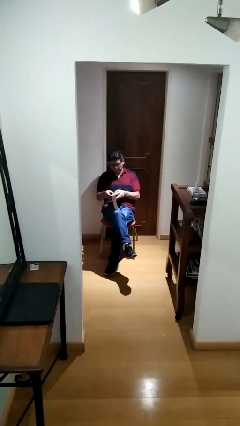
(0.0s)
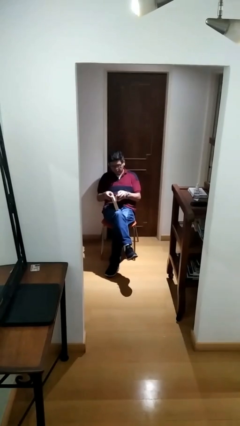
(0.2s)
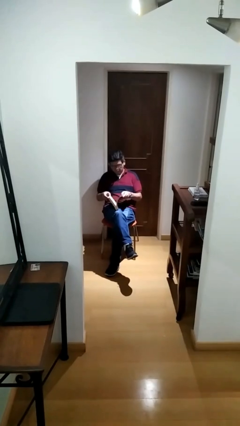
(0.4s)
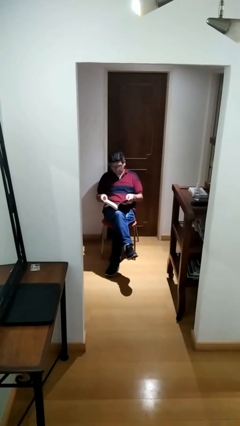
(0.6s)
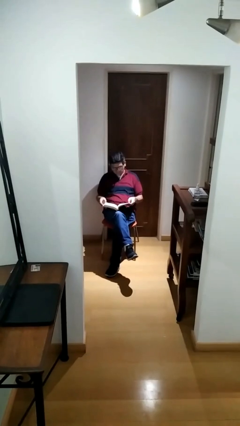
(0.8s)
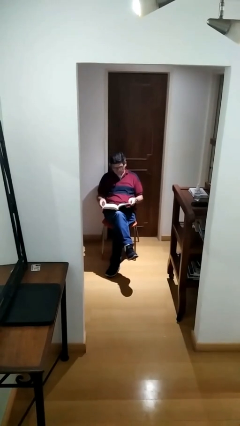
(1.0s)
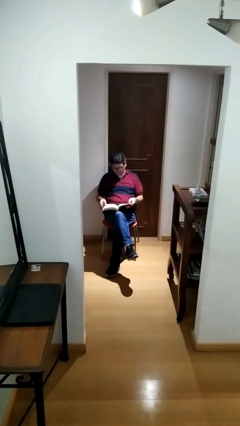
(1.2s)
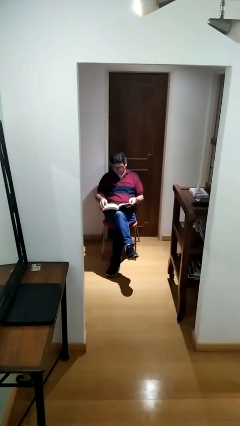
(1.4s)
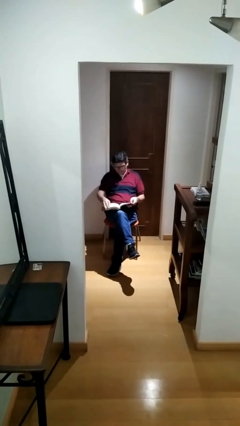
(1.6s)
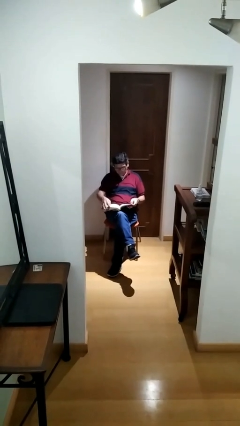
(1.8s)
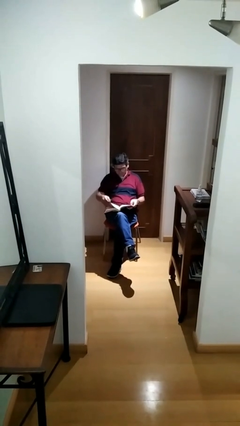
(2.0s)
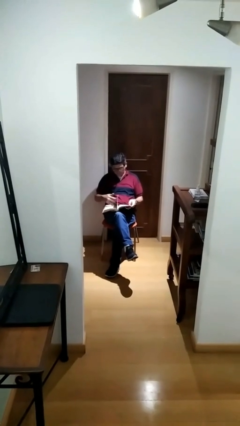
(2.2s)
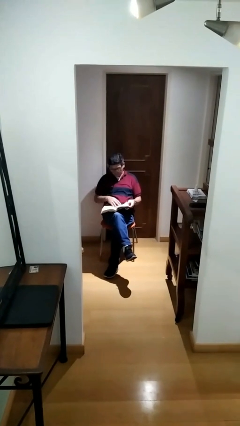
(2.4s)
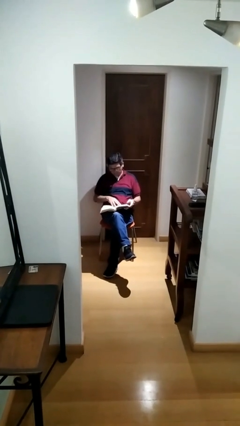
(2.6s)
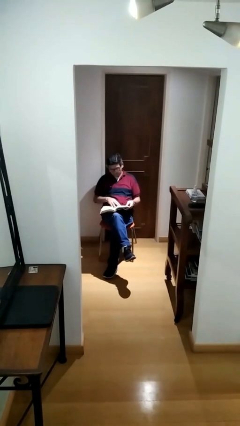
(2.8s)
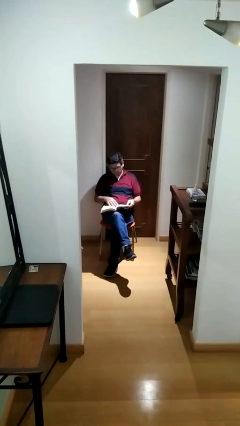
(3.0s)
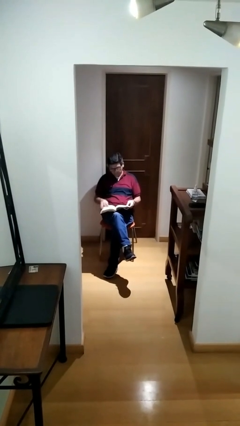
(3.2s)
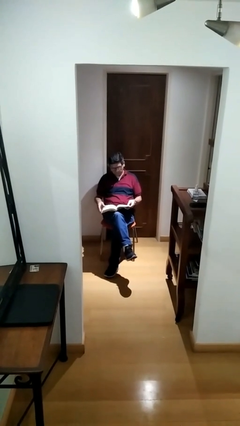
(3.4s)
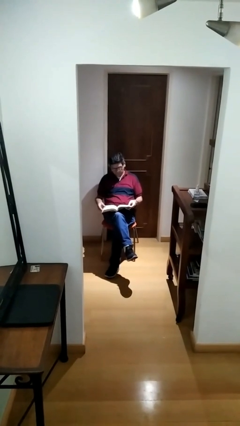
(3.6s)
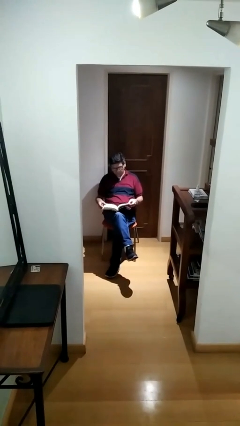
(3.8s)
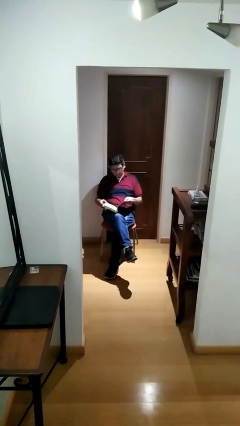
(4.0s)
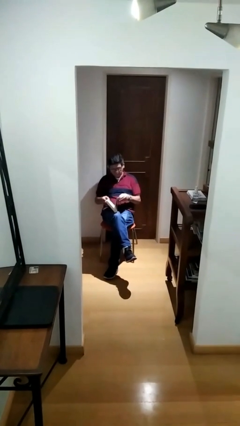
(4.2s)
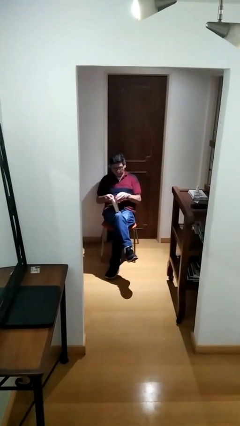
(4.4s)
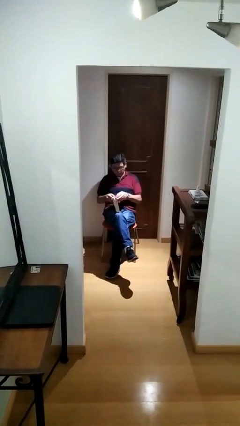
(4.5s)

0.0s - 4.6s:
person reads document

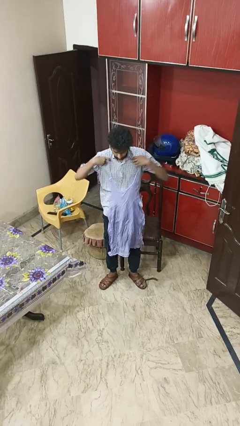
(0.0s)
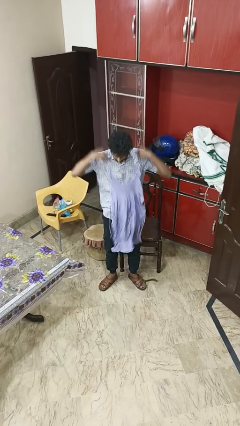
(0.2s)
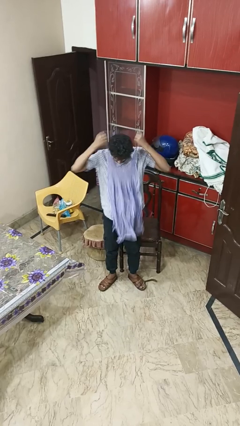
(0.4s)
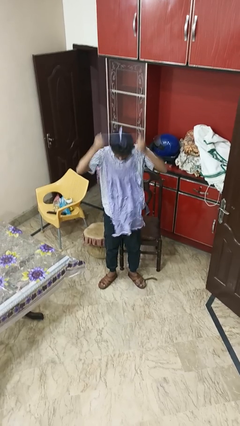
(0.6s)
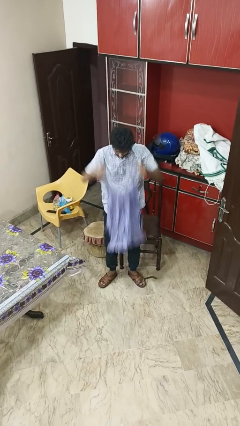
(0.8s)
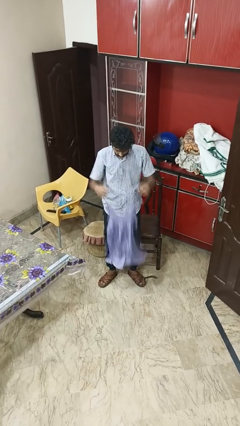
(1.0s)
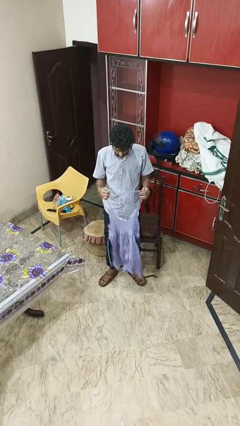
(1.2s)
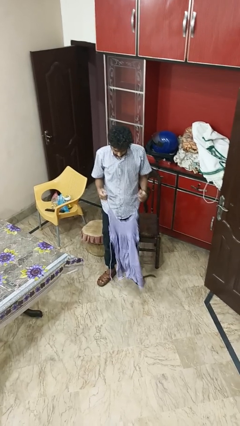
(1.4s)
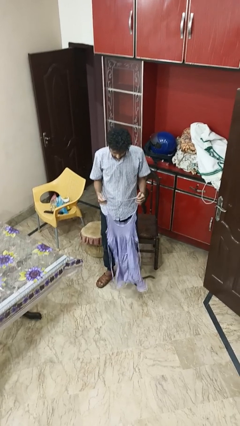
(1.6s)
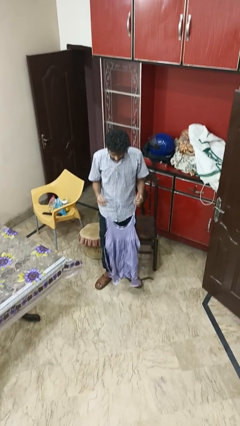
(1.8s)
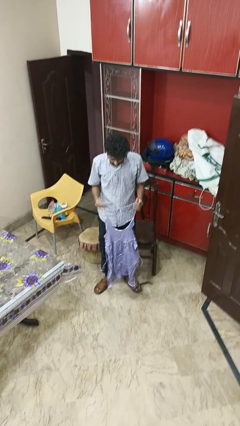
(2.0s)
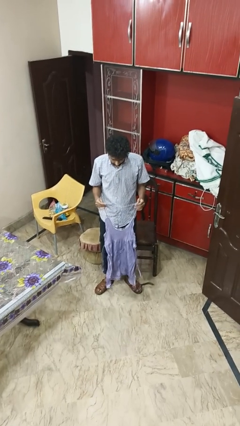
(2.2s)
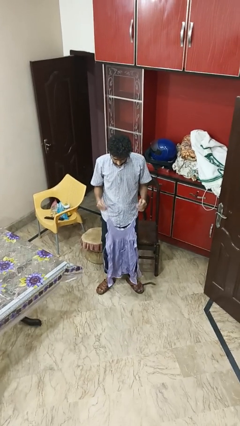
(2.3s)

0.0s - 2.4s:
person takes off apron

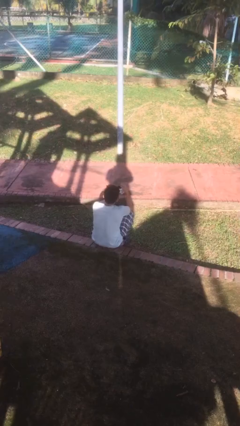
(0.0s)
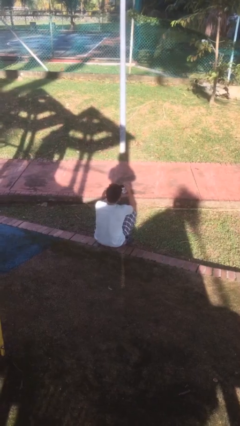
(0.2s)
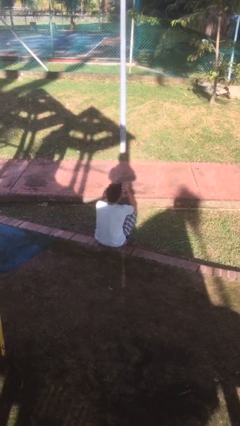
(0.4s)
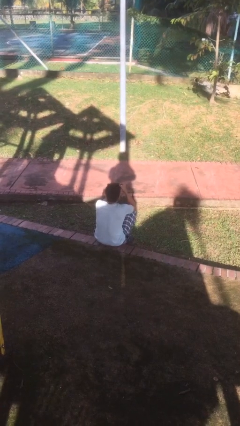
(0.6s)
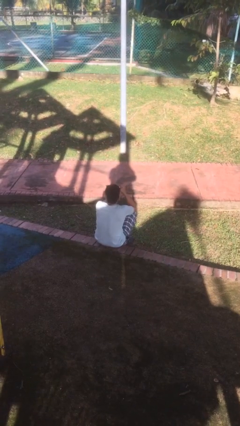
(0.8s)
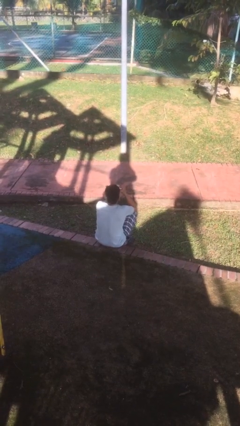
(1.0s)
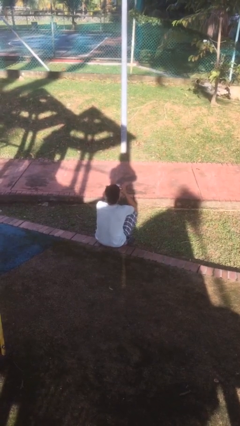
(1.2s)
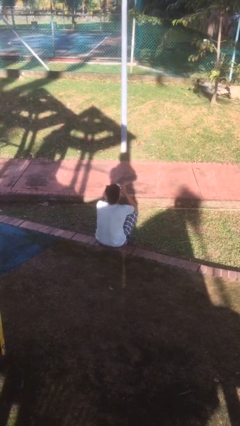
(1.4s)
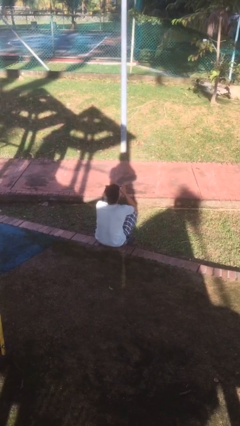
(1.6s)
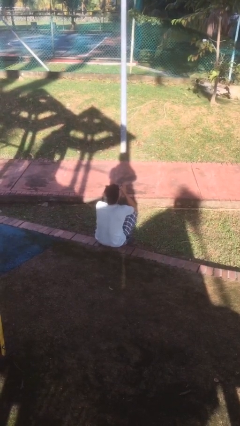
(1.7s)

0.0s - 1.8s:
person drinks from mug

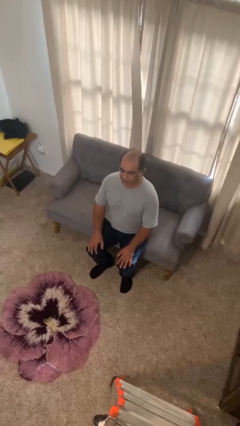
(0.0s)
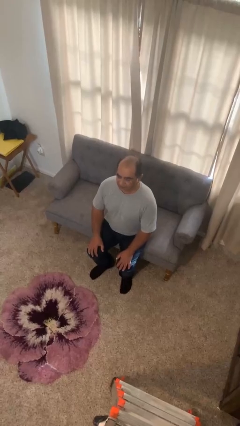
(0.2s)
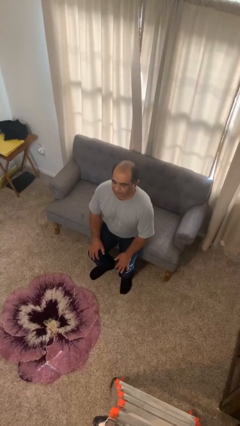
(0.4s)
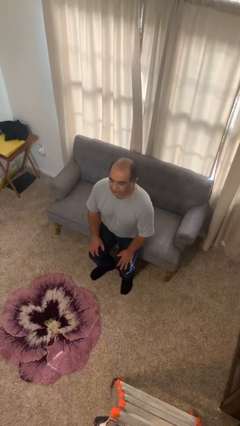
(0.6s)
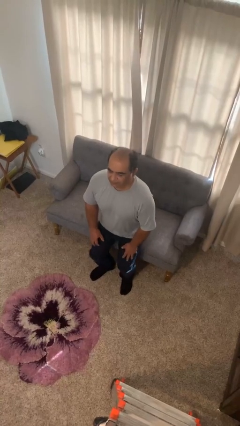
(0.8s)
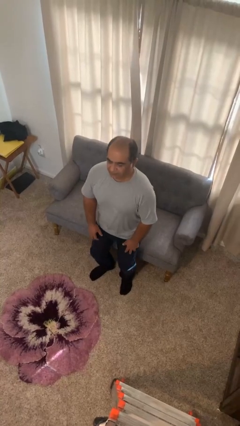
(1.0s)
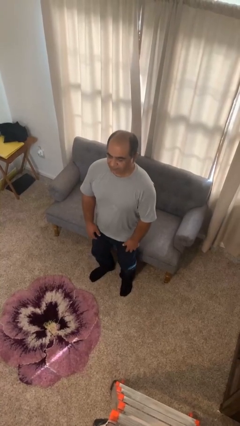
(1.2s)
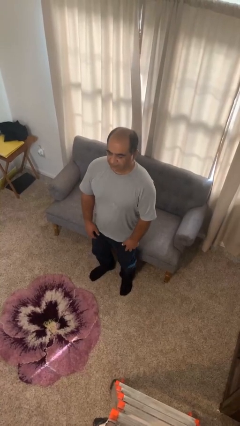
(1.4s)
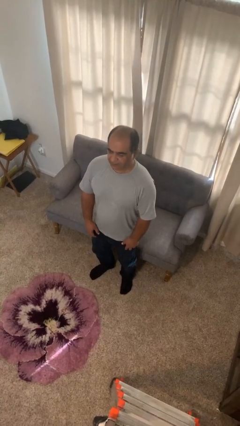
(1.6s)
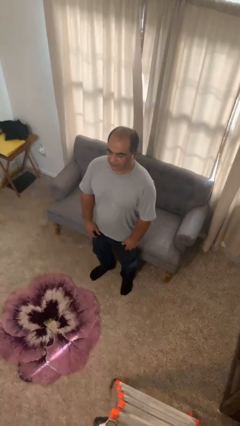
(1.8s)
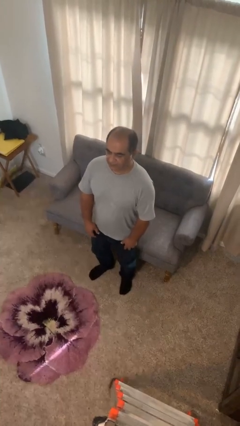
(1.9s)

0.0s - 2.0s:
person stands up

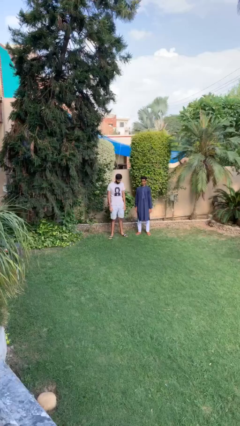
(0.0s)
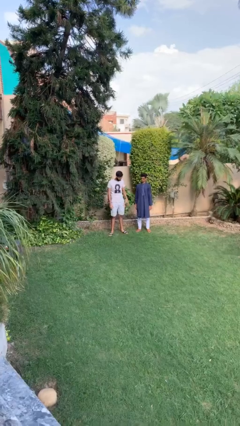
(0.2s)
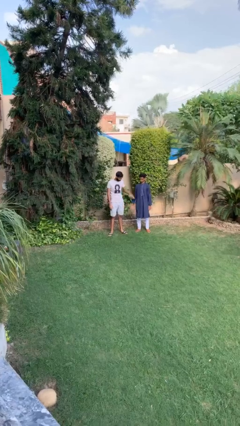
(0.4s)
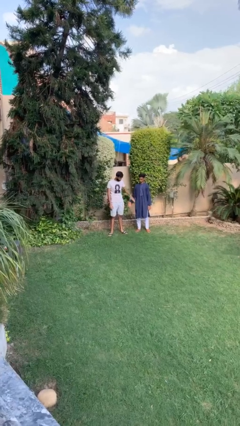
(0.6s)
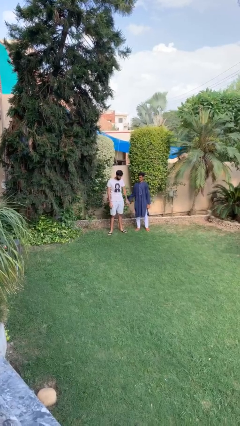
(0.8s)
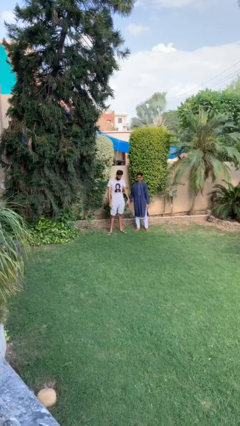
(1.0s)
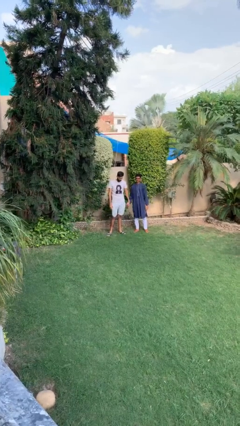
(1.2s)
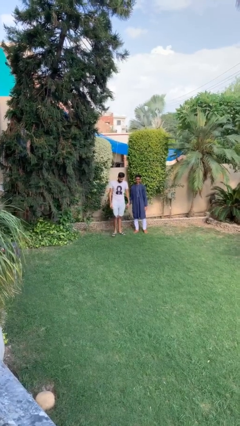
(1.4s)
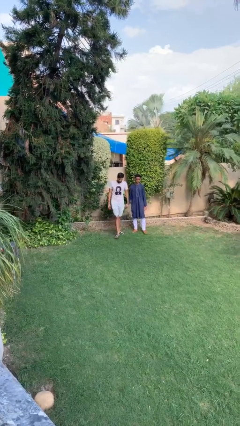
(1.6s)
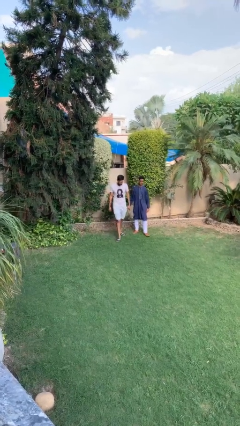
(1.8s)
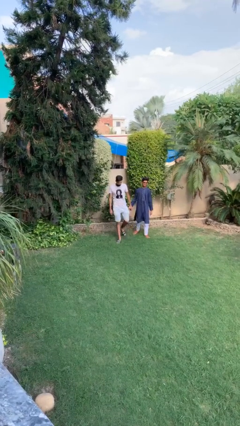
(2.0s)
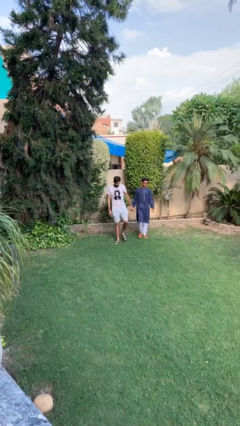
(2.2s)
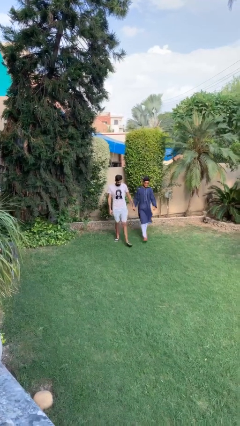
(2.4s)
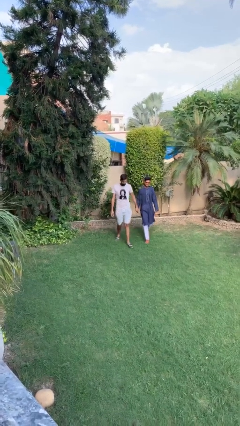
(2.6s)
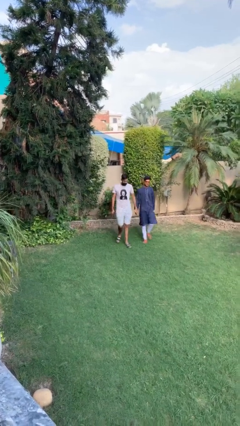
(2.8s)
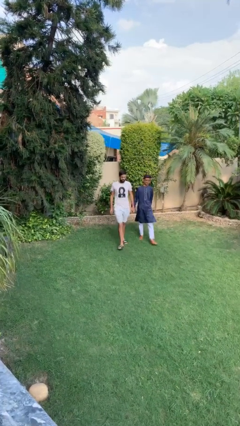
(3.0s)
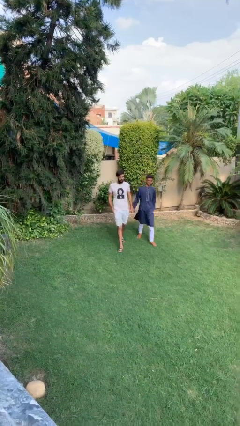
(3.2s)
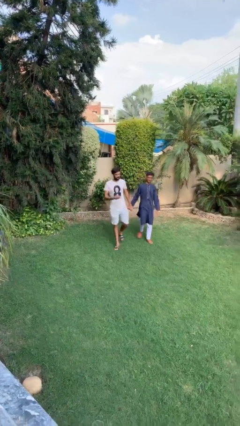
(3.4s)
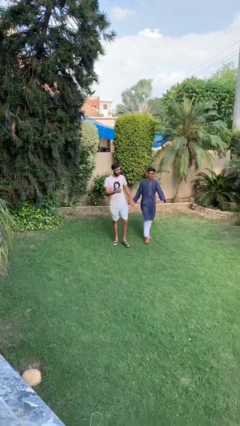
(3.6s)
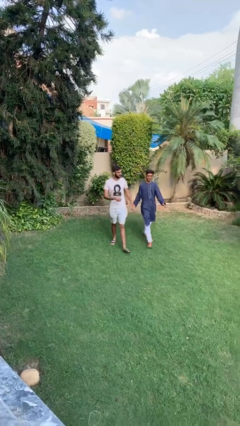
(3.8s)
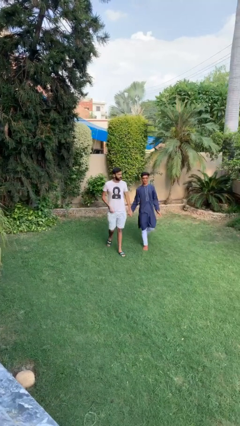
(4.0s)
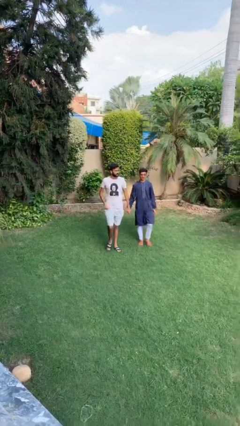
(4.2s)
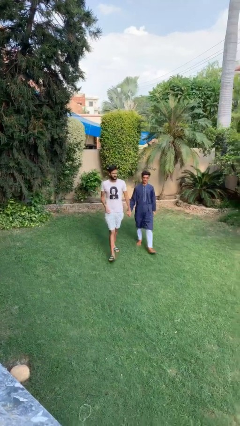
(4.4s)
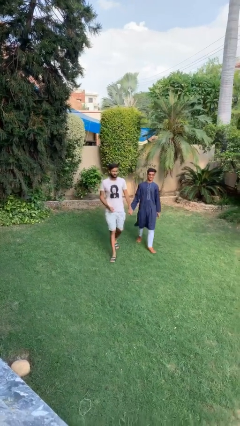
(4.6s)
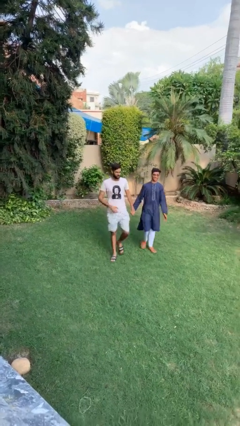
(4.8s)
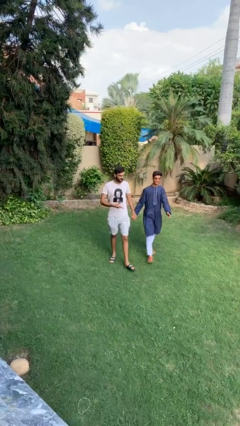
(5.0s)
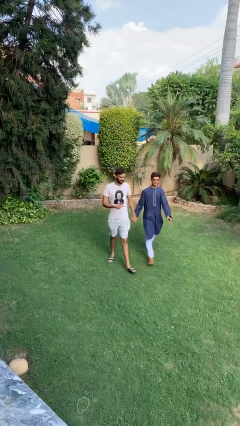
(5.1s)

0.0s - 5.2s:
person holds hand

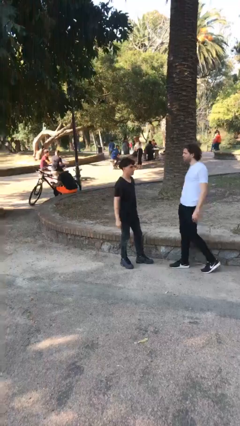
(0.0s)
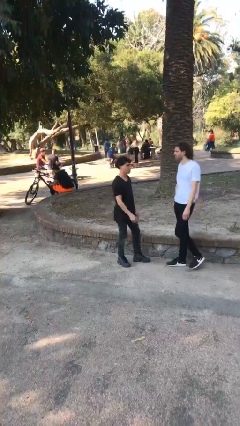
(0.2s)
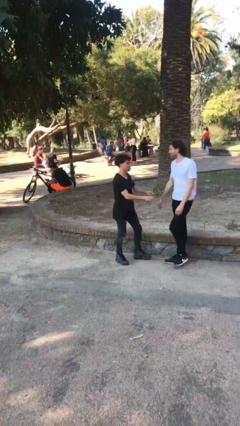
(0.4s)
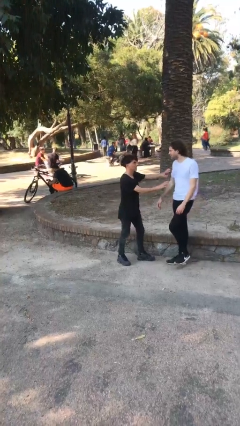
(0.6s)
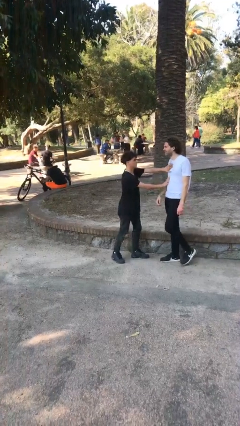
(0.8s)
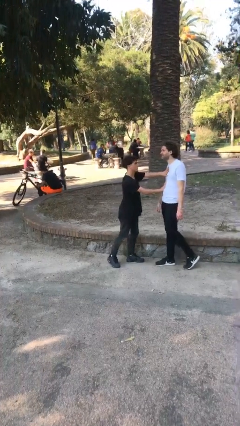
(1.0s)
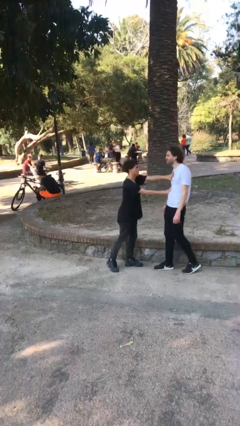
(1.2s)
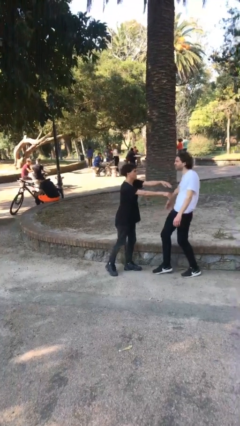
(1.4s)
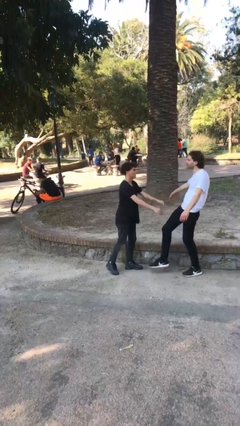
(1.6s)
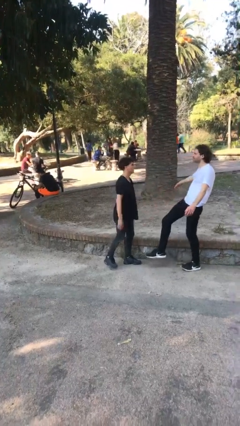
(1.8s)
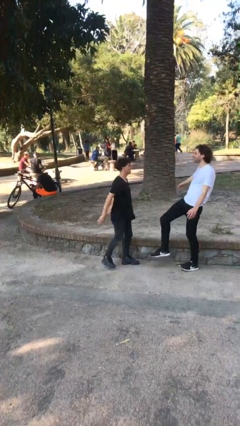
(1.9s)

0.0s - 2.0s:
person shoves person
